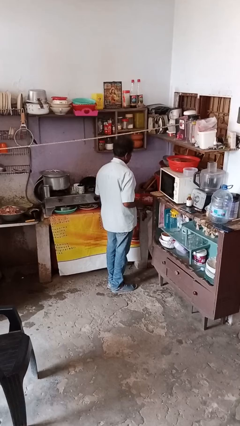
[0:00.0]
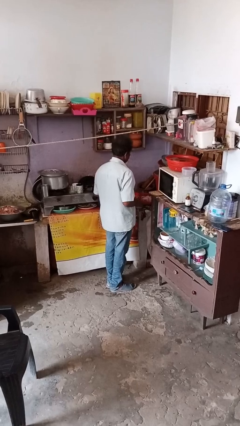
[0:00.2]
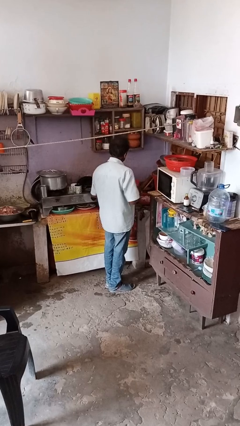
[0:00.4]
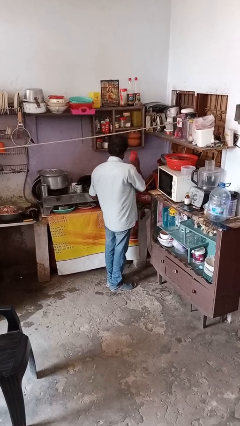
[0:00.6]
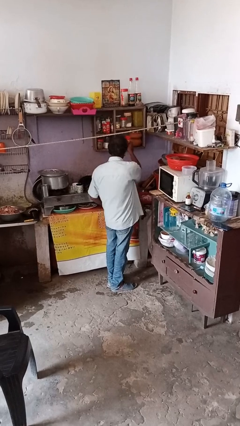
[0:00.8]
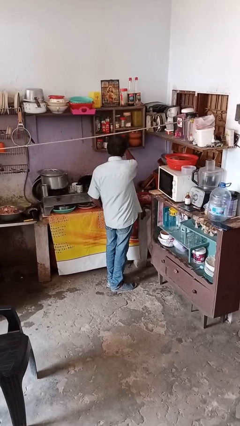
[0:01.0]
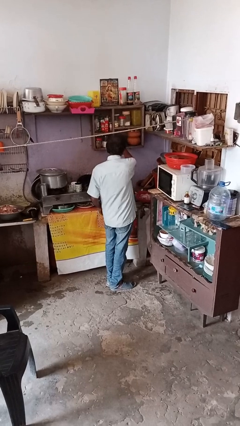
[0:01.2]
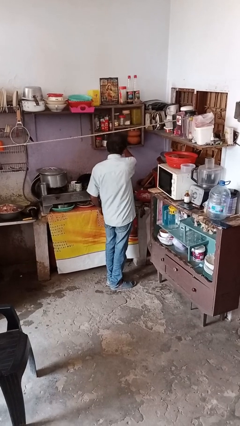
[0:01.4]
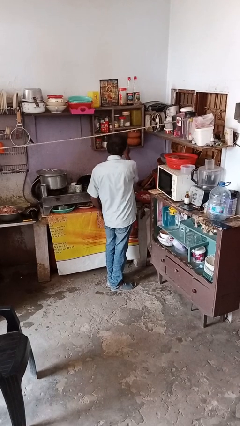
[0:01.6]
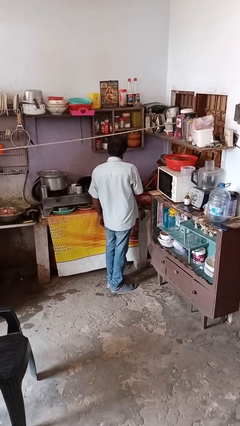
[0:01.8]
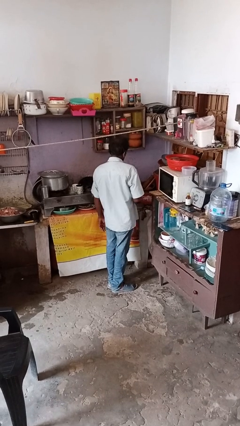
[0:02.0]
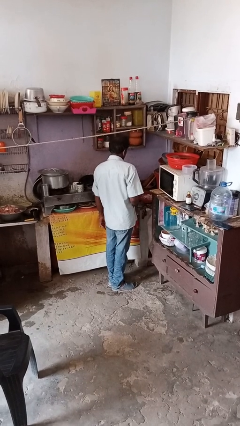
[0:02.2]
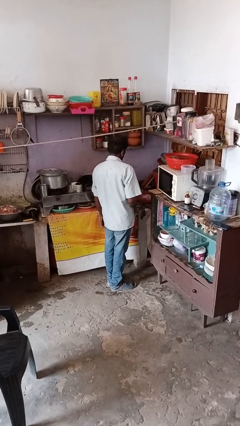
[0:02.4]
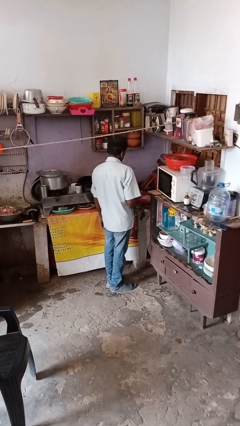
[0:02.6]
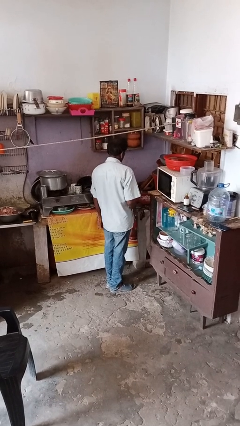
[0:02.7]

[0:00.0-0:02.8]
person puts down object on shelf

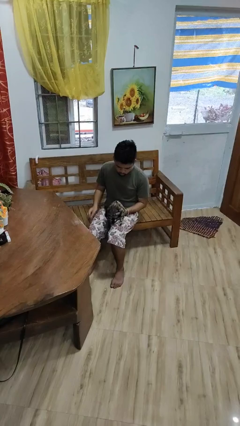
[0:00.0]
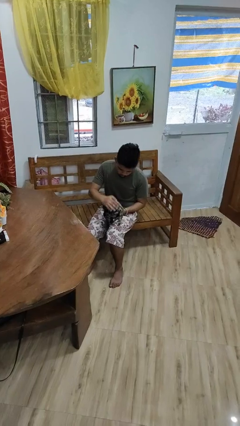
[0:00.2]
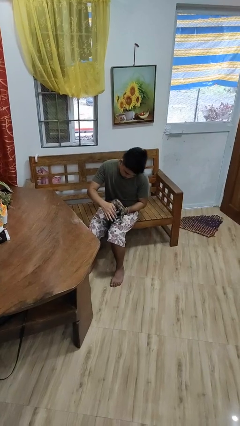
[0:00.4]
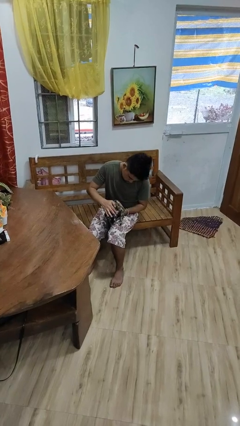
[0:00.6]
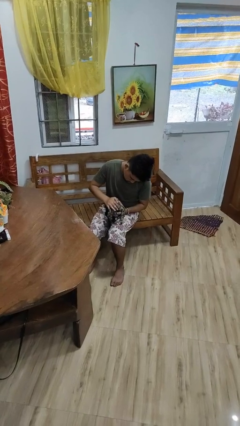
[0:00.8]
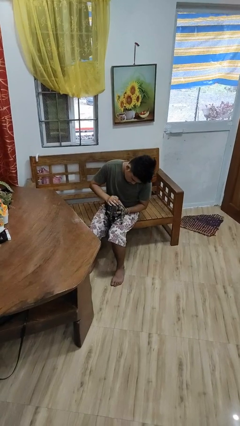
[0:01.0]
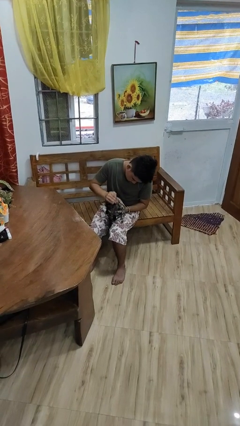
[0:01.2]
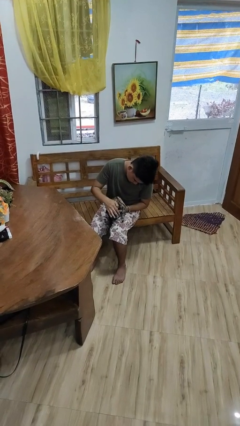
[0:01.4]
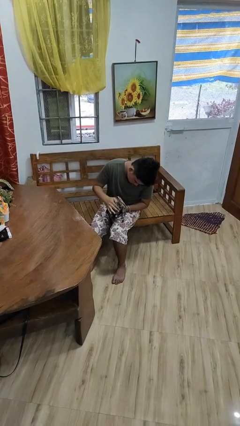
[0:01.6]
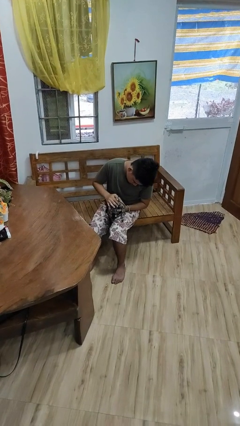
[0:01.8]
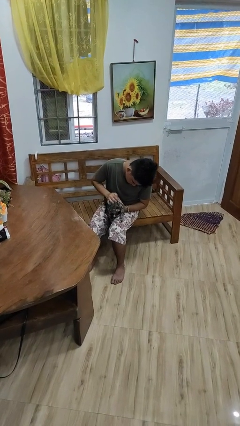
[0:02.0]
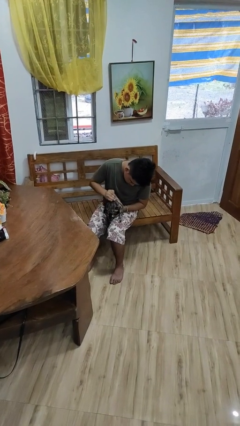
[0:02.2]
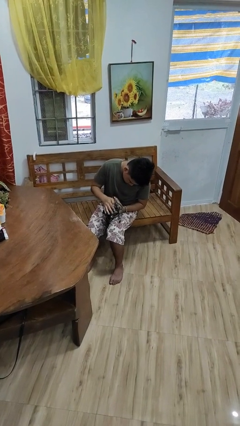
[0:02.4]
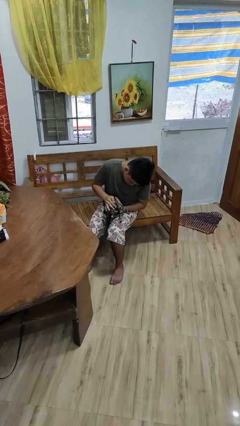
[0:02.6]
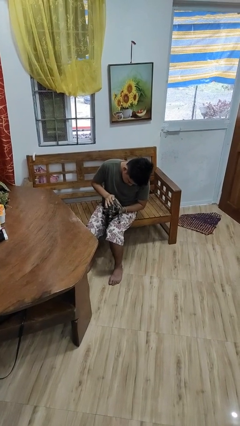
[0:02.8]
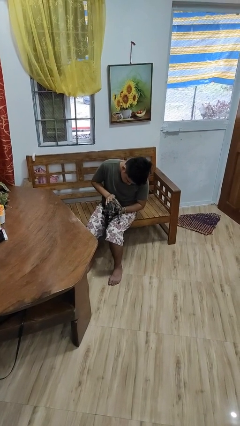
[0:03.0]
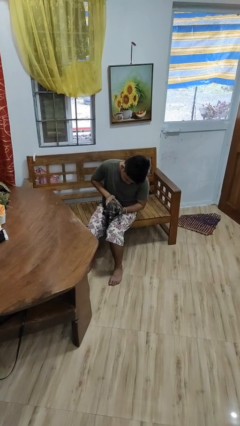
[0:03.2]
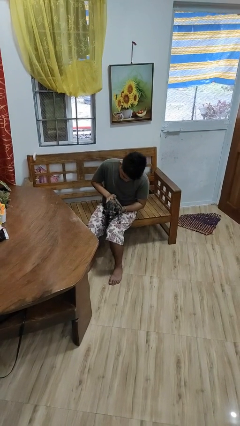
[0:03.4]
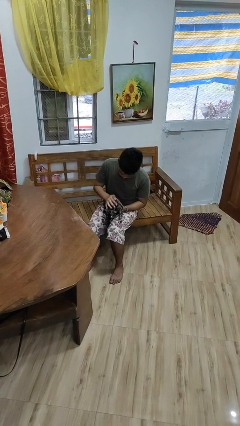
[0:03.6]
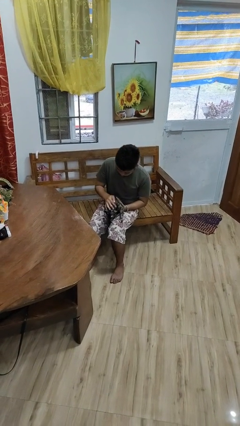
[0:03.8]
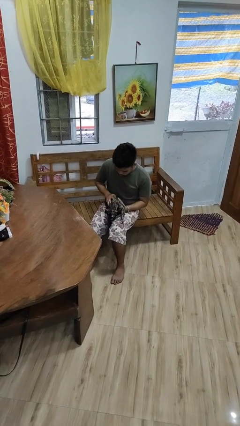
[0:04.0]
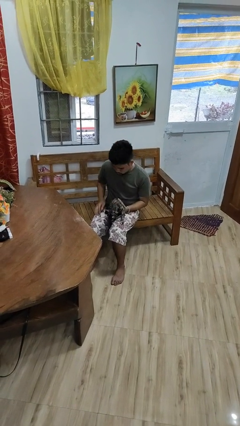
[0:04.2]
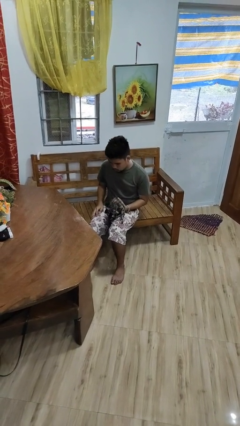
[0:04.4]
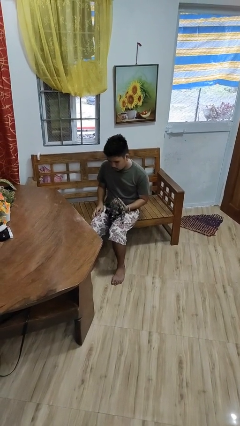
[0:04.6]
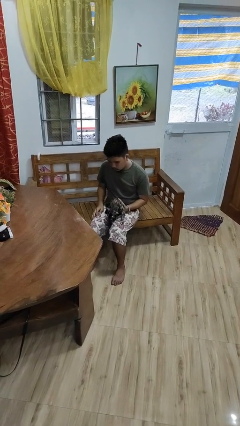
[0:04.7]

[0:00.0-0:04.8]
person pets cat

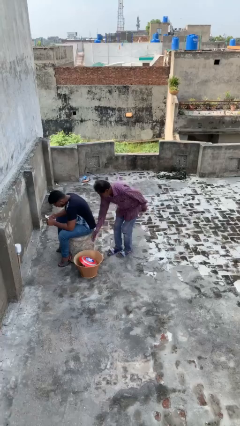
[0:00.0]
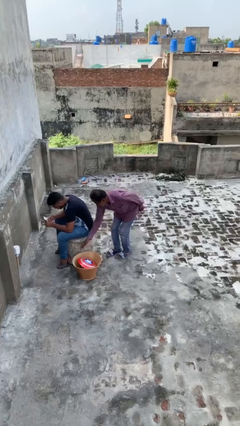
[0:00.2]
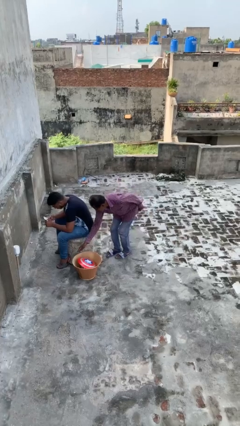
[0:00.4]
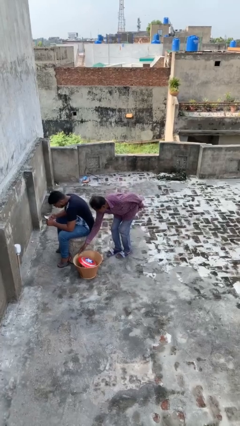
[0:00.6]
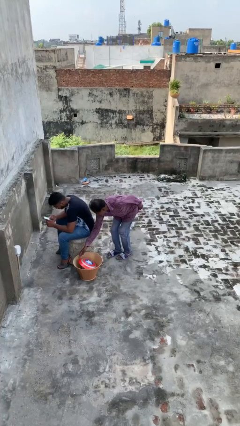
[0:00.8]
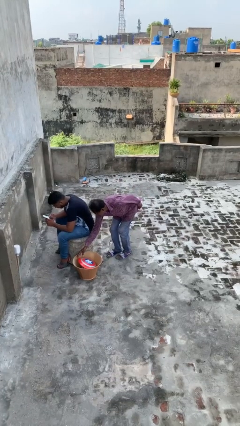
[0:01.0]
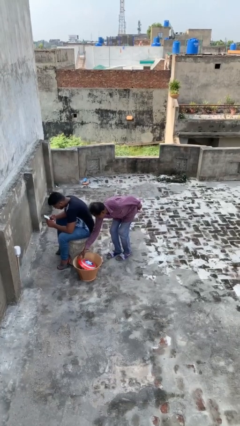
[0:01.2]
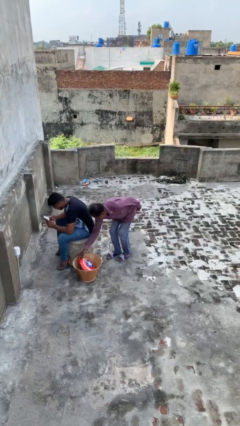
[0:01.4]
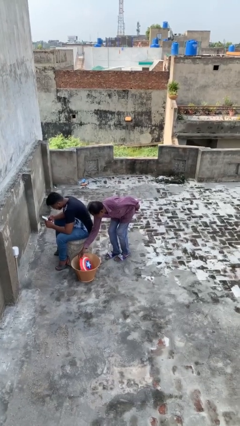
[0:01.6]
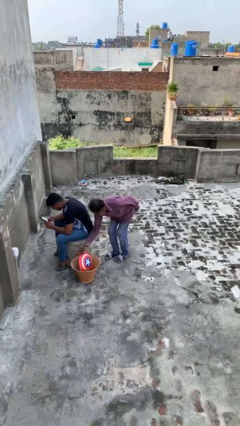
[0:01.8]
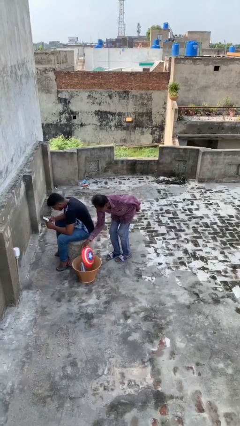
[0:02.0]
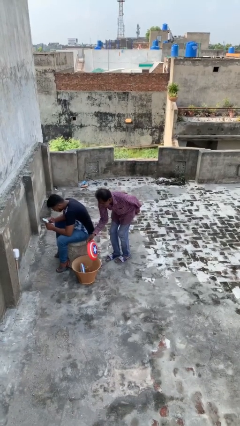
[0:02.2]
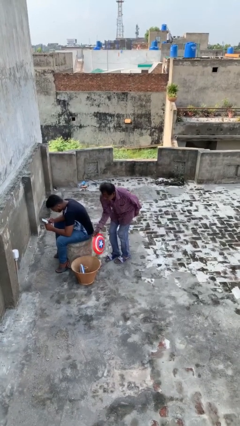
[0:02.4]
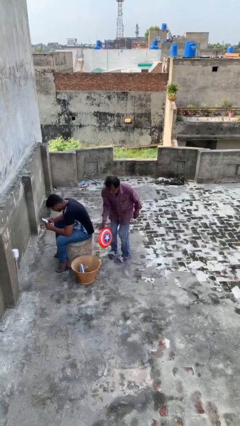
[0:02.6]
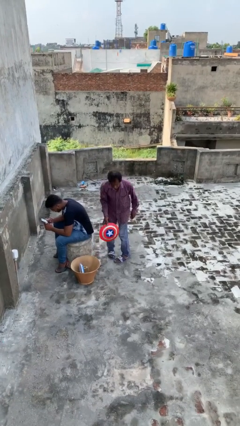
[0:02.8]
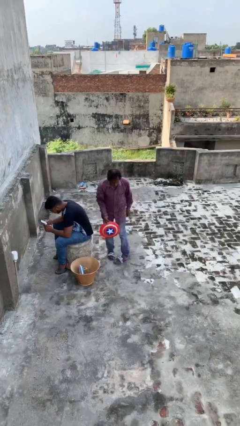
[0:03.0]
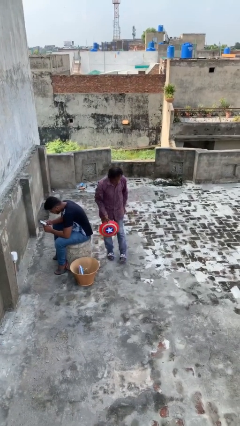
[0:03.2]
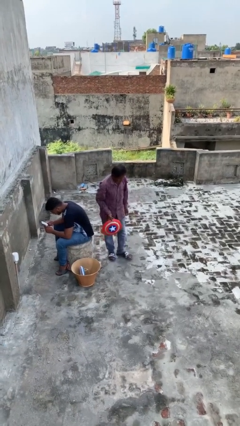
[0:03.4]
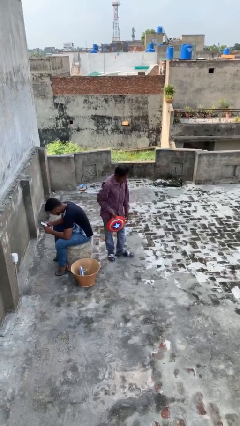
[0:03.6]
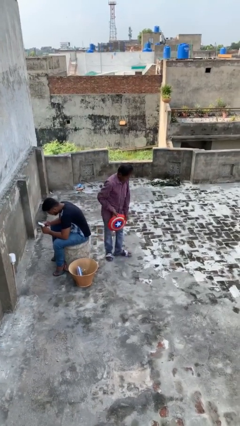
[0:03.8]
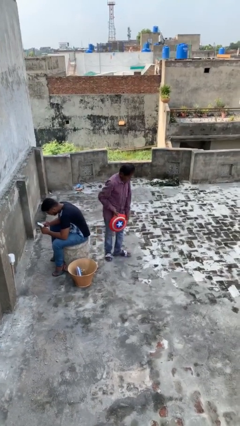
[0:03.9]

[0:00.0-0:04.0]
person steals object from person

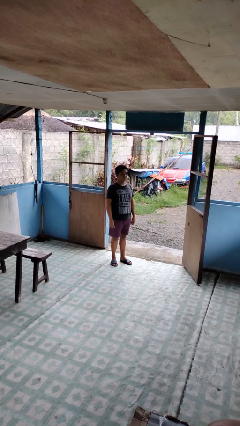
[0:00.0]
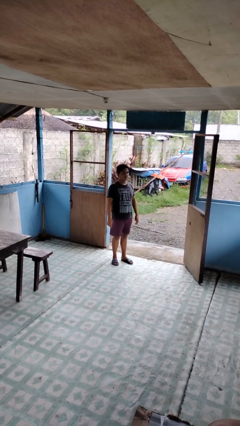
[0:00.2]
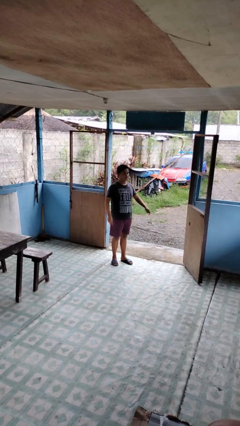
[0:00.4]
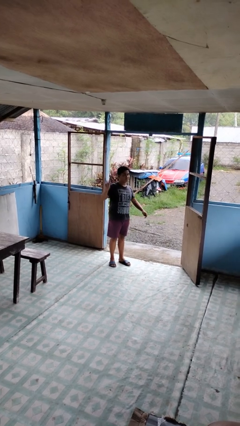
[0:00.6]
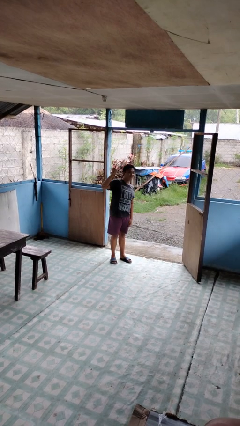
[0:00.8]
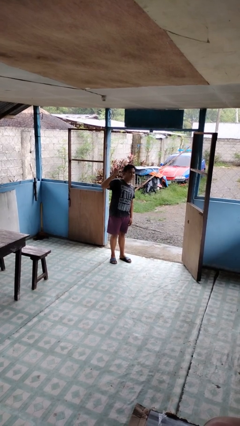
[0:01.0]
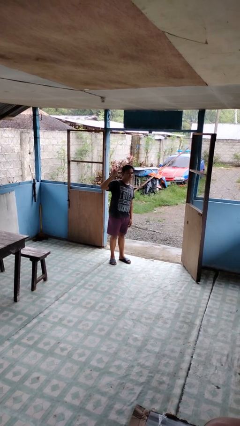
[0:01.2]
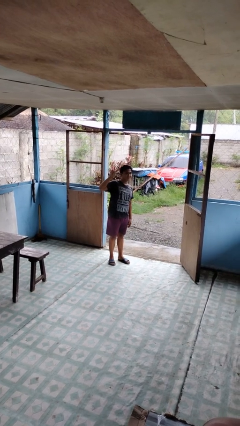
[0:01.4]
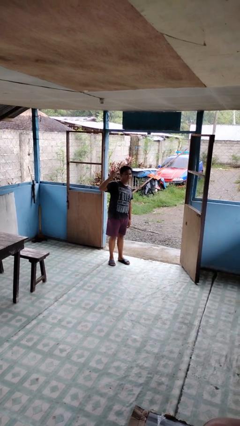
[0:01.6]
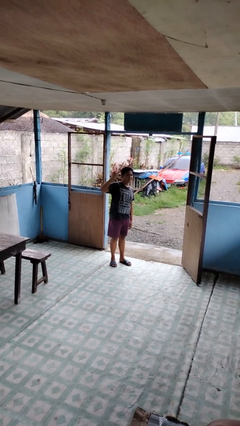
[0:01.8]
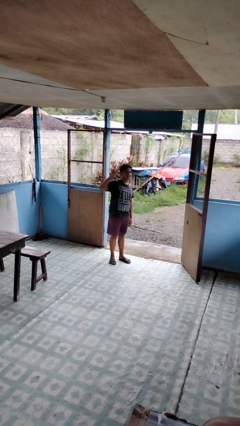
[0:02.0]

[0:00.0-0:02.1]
person gestures peace

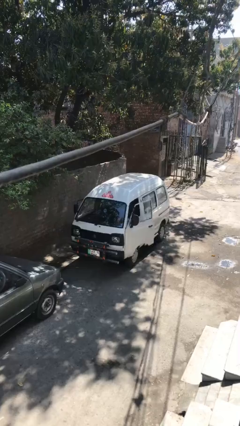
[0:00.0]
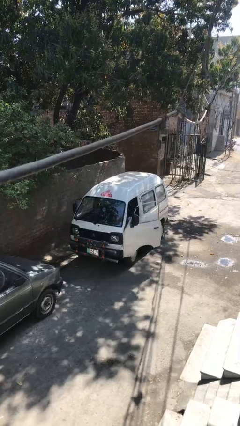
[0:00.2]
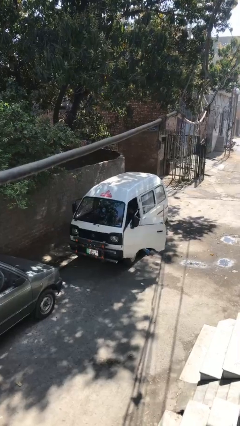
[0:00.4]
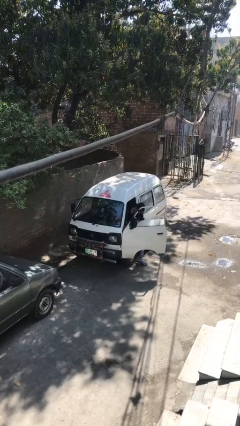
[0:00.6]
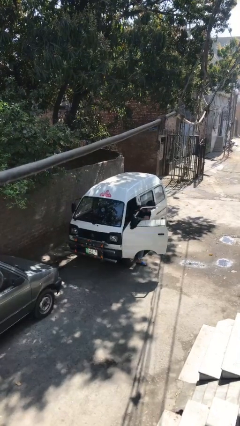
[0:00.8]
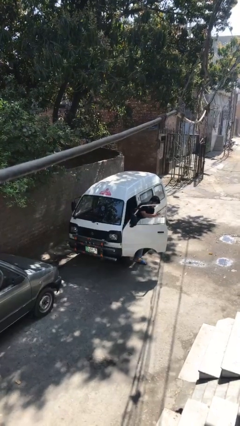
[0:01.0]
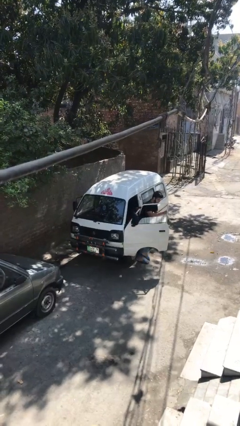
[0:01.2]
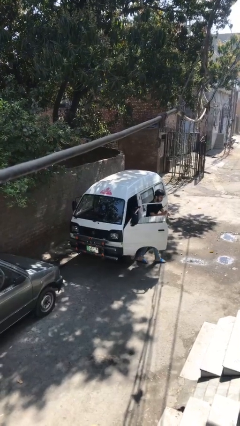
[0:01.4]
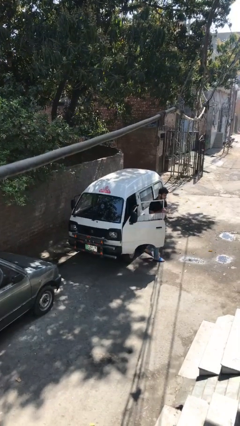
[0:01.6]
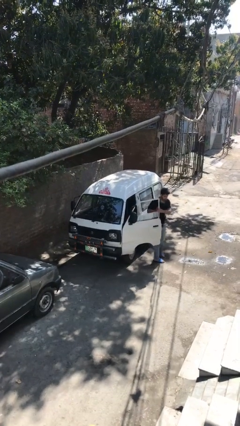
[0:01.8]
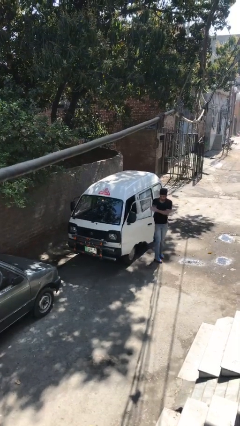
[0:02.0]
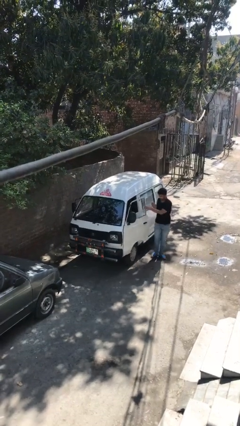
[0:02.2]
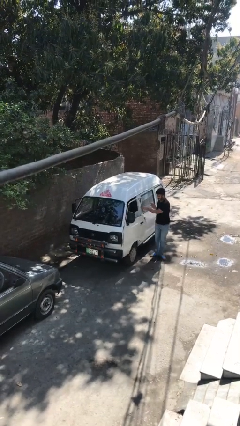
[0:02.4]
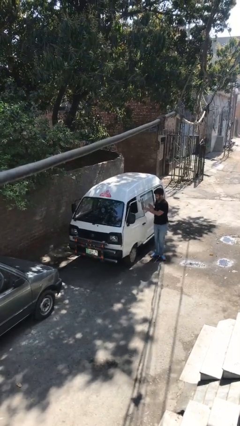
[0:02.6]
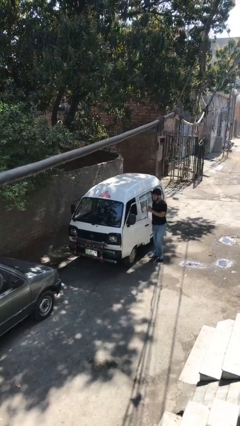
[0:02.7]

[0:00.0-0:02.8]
car drops off person

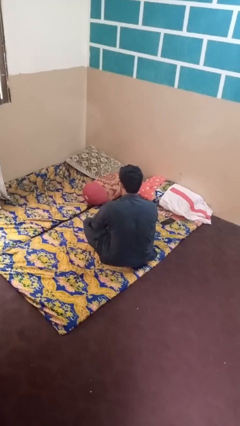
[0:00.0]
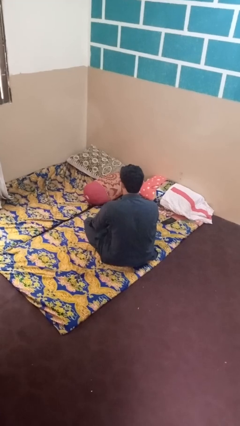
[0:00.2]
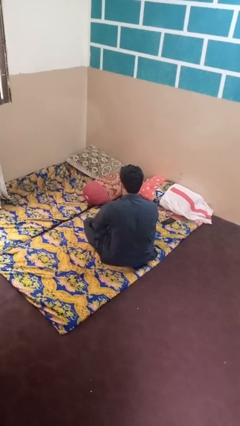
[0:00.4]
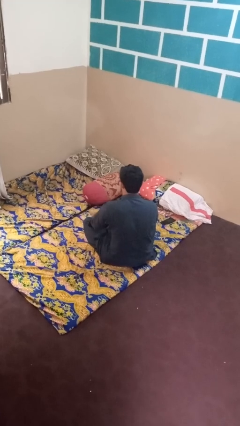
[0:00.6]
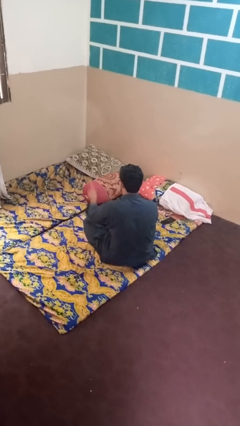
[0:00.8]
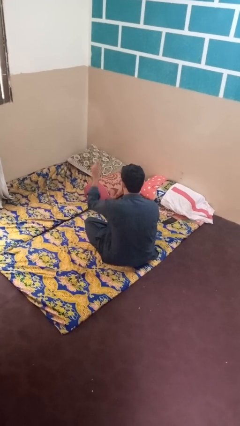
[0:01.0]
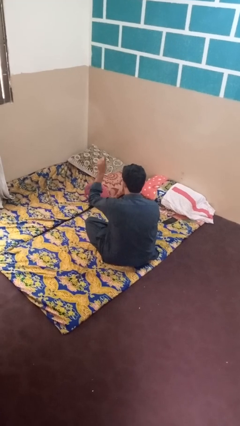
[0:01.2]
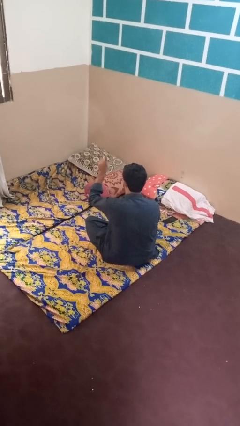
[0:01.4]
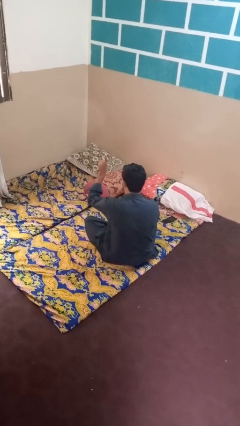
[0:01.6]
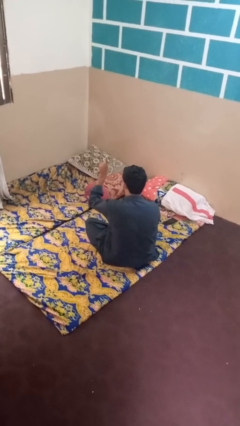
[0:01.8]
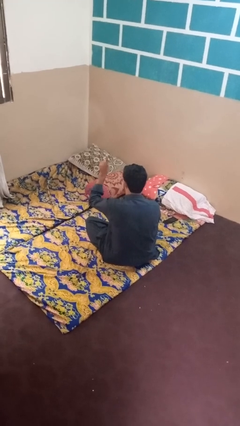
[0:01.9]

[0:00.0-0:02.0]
person gestures hang loose
